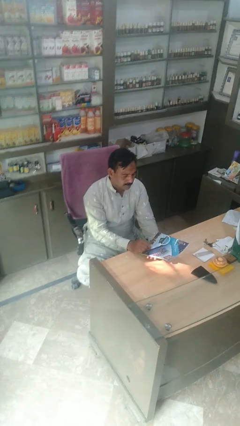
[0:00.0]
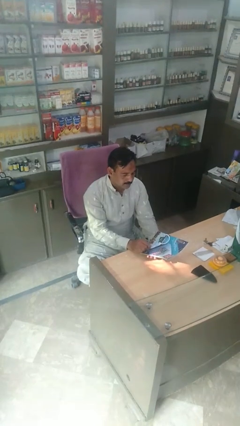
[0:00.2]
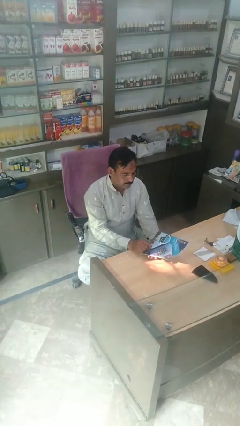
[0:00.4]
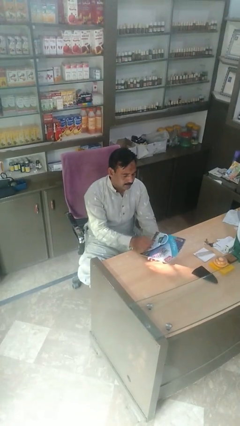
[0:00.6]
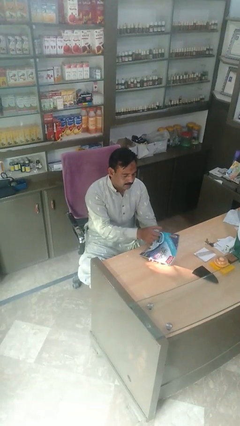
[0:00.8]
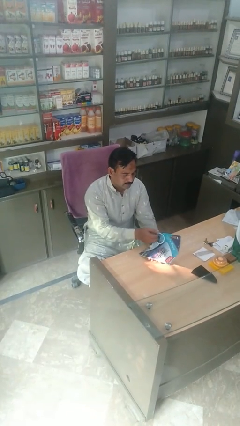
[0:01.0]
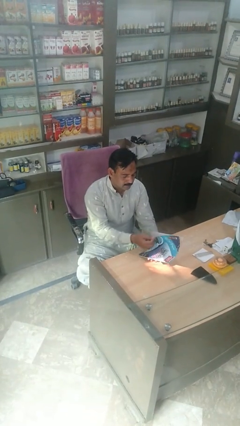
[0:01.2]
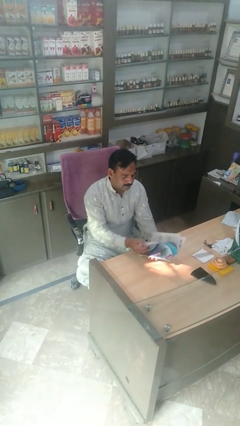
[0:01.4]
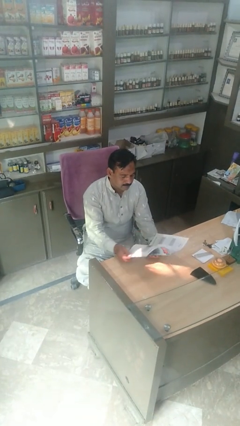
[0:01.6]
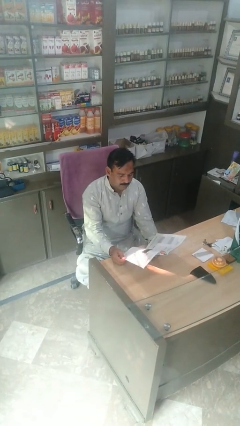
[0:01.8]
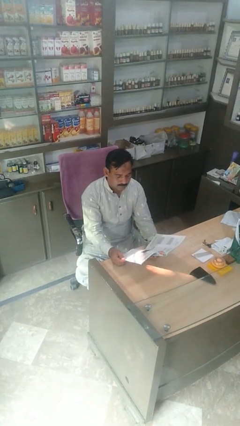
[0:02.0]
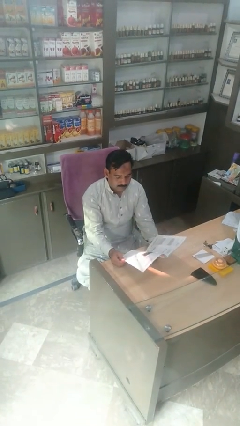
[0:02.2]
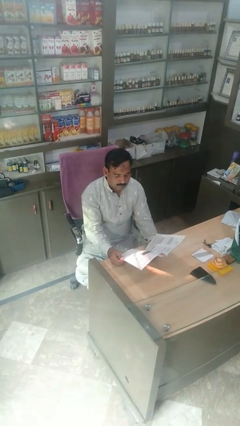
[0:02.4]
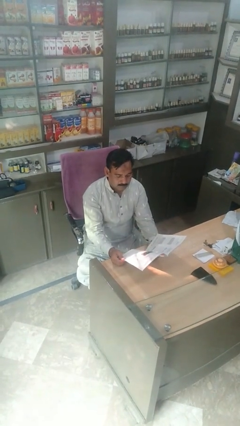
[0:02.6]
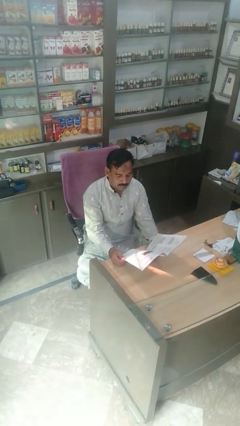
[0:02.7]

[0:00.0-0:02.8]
person reads magazine

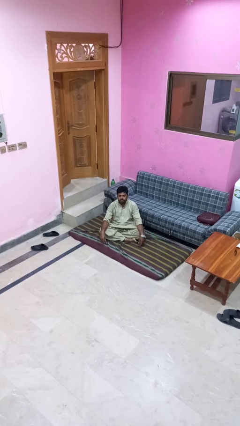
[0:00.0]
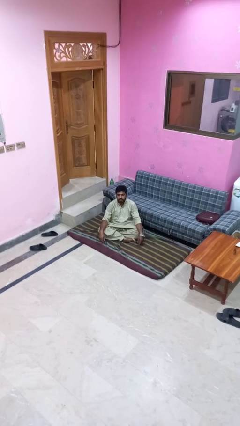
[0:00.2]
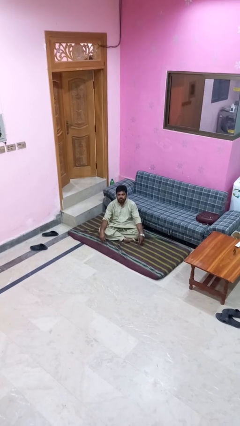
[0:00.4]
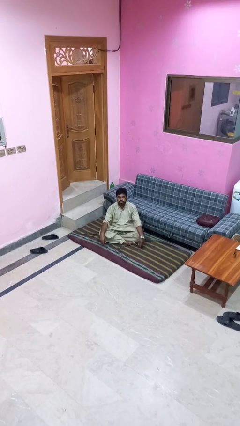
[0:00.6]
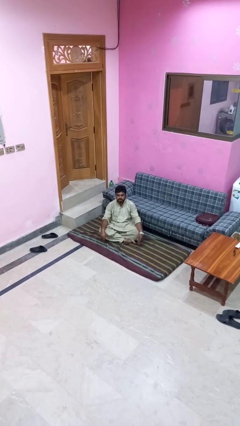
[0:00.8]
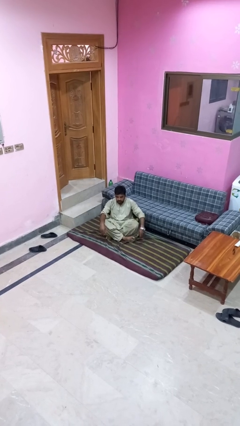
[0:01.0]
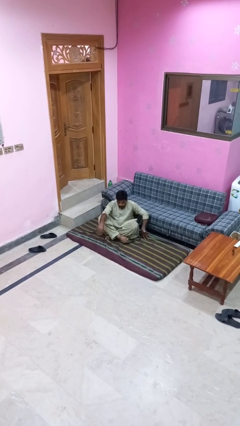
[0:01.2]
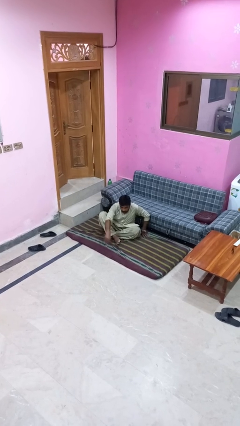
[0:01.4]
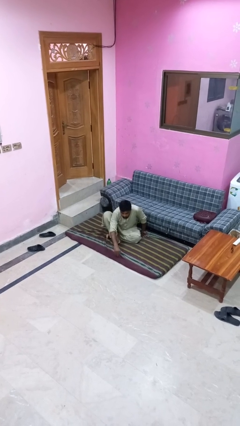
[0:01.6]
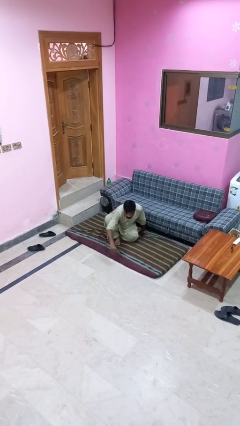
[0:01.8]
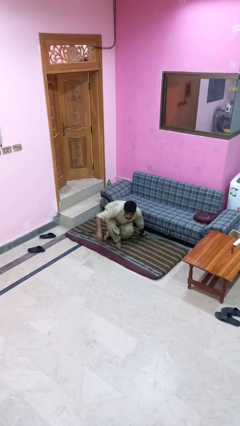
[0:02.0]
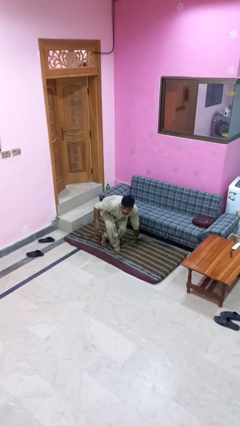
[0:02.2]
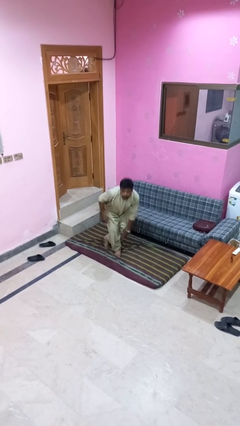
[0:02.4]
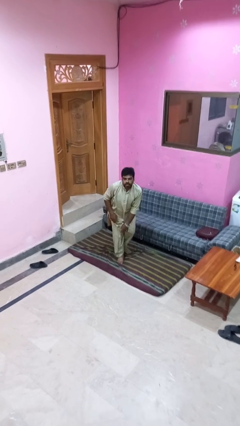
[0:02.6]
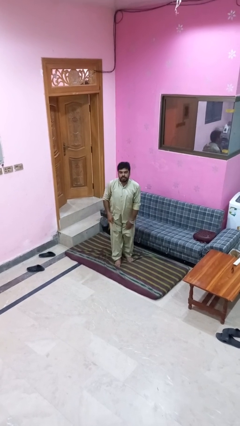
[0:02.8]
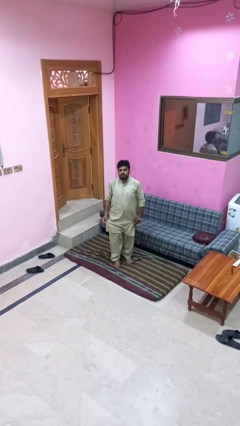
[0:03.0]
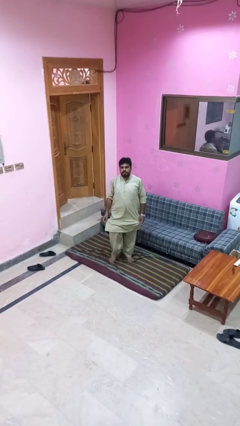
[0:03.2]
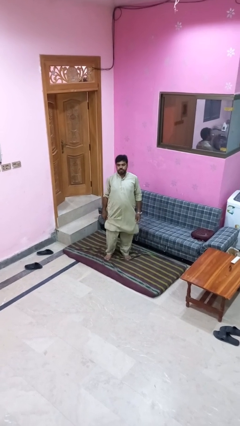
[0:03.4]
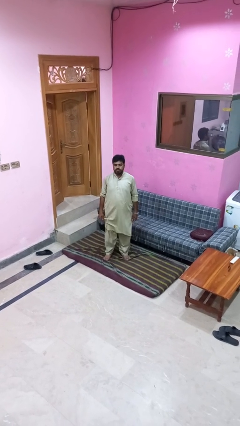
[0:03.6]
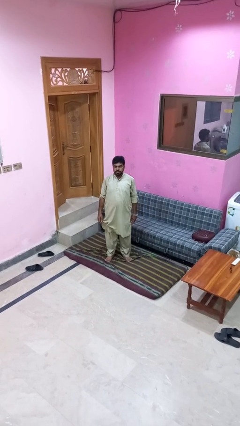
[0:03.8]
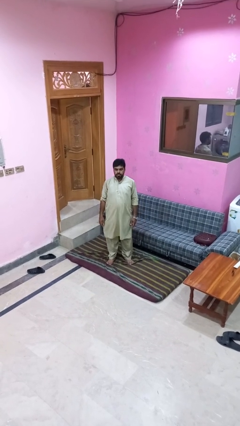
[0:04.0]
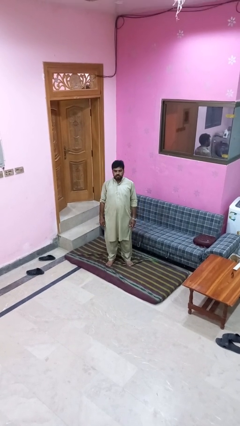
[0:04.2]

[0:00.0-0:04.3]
person stands up from floor

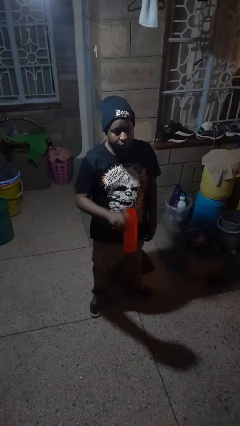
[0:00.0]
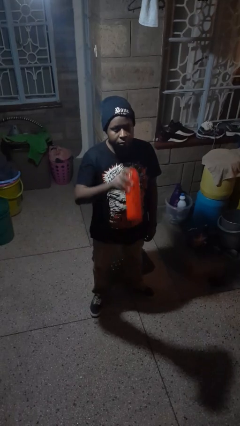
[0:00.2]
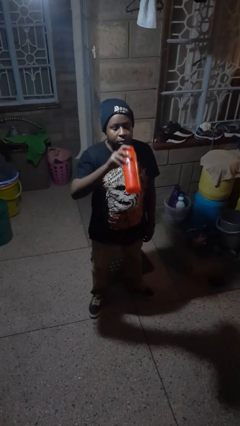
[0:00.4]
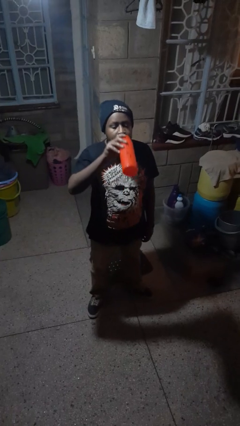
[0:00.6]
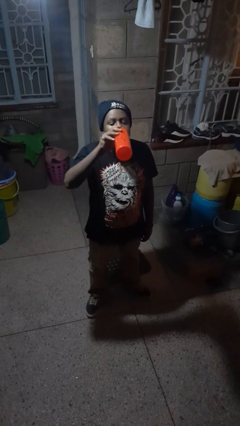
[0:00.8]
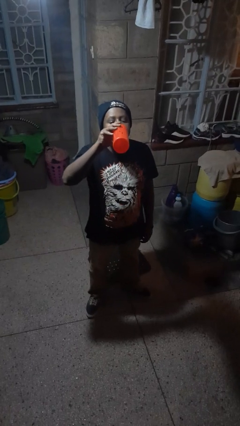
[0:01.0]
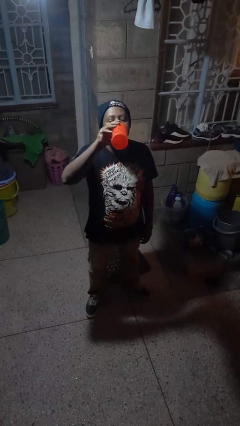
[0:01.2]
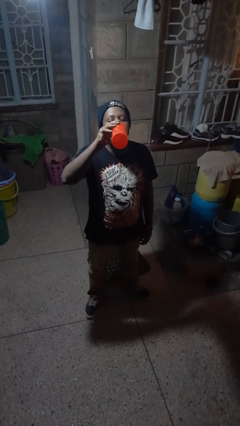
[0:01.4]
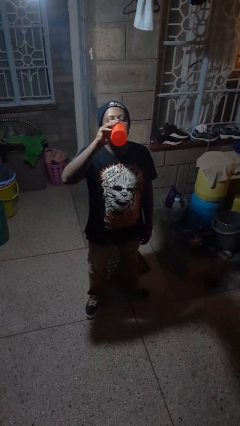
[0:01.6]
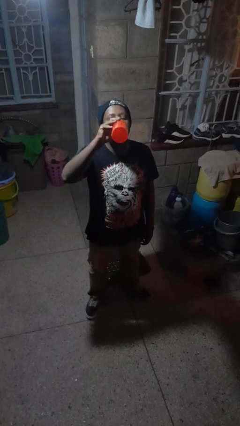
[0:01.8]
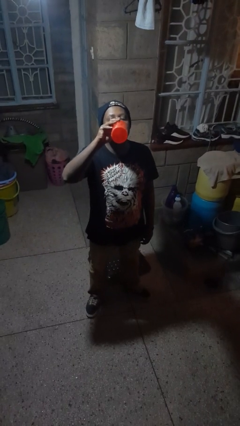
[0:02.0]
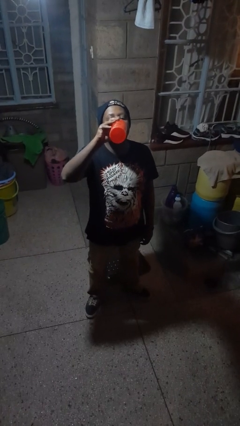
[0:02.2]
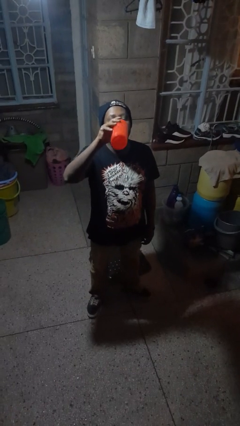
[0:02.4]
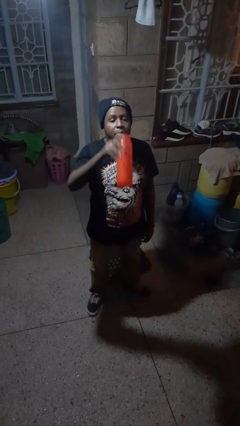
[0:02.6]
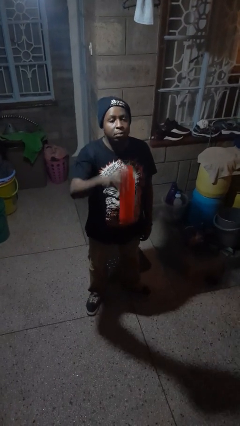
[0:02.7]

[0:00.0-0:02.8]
person drinks from bottle

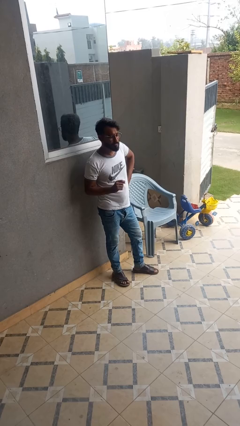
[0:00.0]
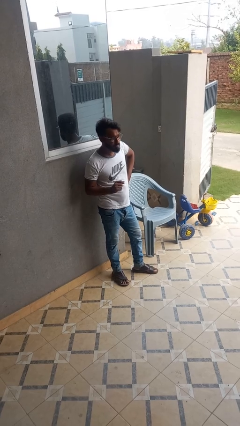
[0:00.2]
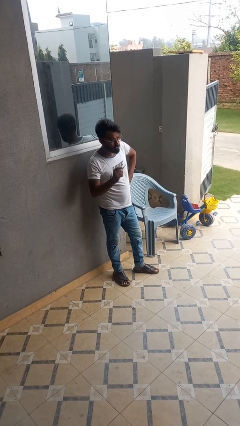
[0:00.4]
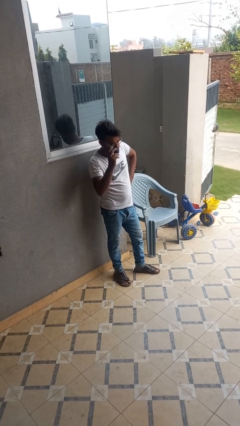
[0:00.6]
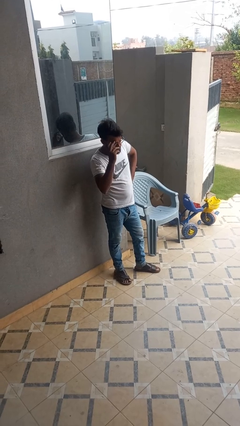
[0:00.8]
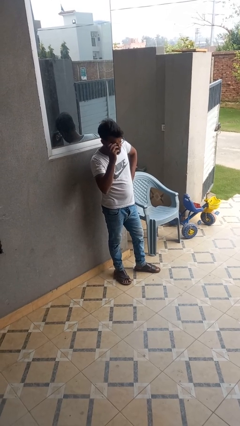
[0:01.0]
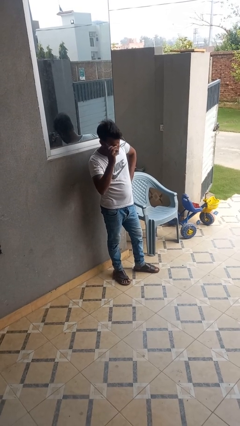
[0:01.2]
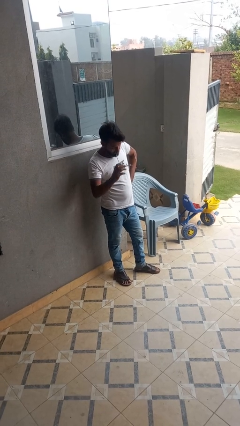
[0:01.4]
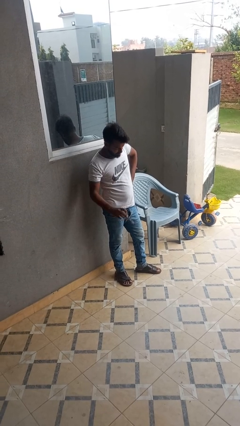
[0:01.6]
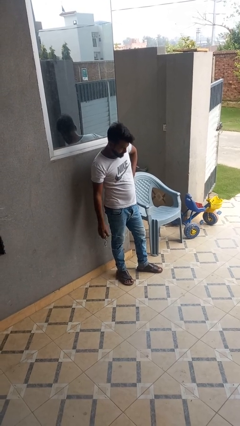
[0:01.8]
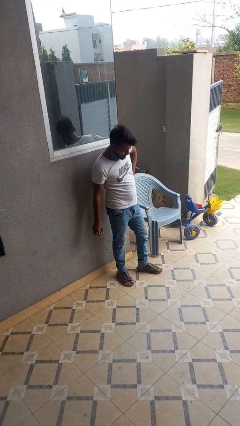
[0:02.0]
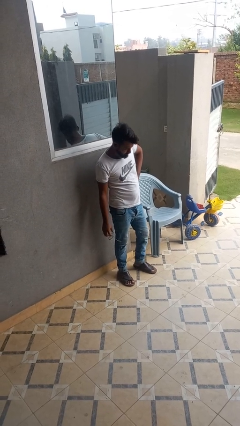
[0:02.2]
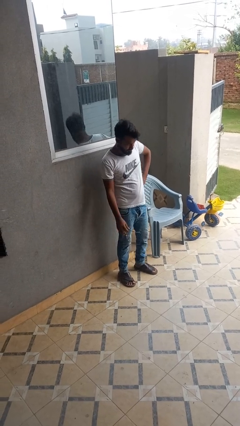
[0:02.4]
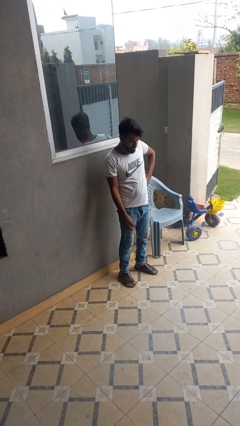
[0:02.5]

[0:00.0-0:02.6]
person takes off glasses

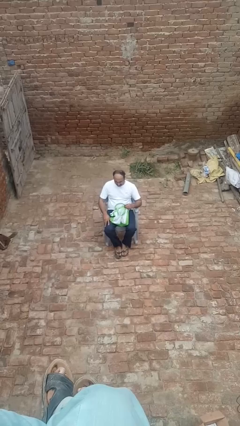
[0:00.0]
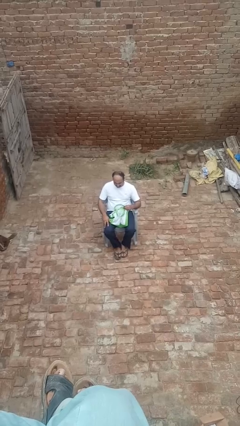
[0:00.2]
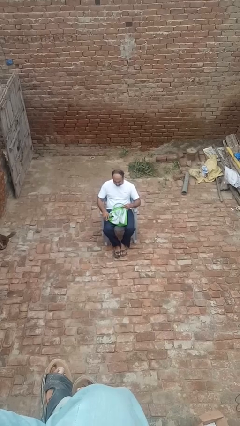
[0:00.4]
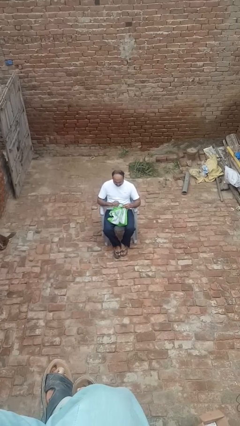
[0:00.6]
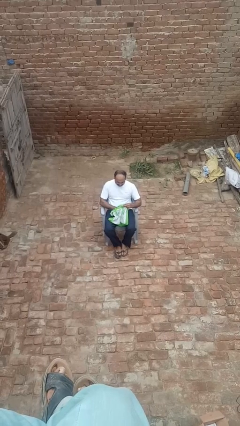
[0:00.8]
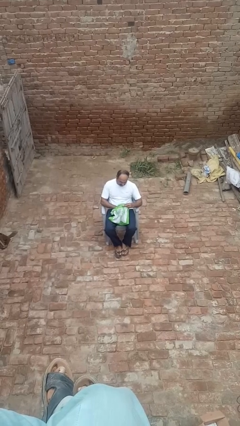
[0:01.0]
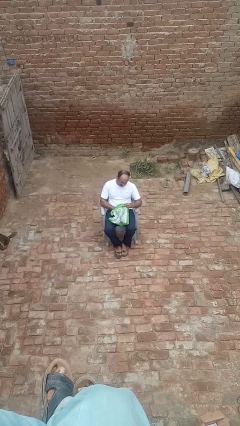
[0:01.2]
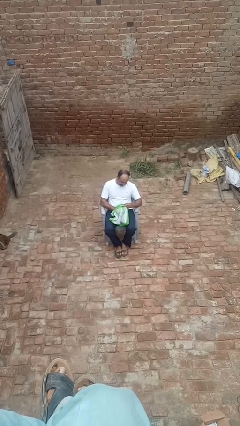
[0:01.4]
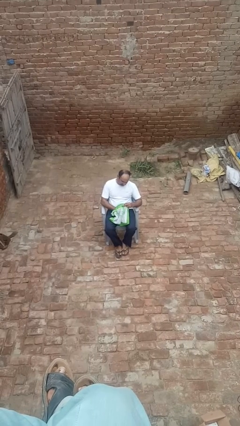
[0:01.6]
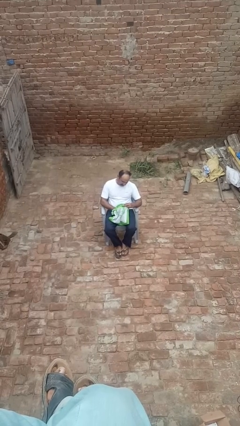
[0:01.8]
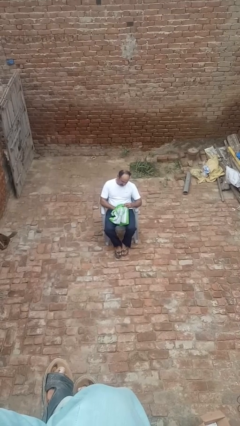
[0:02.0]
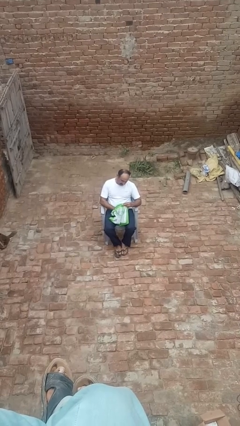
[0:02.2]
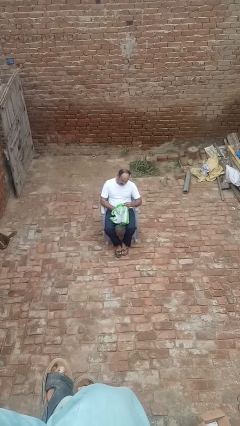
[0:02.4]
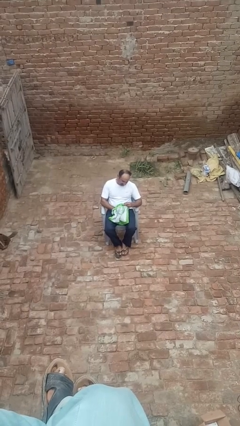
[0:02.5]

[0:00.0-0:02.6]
person searches in bag

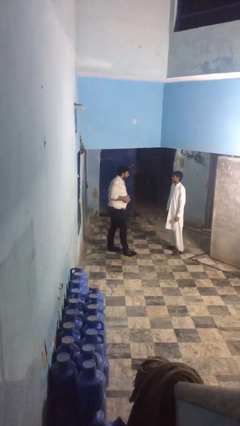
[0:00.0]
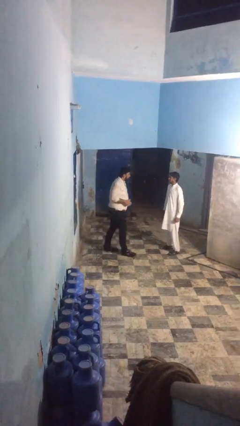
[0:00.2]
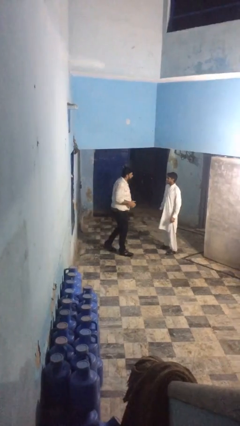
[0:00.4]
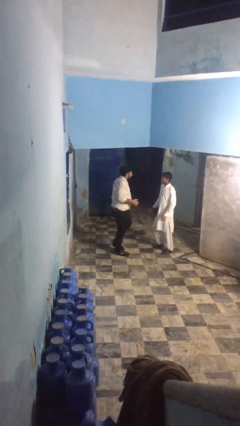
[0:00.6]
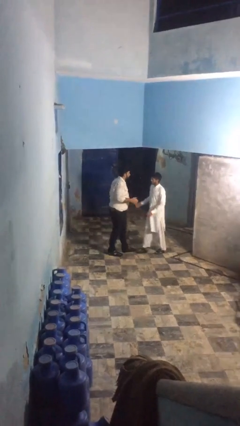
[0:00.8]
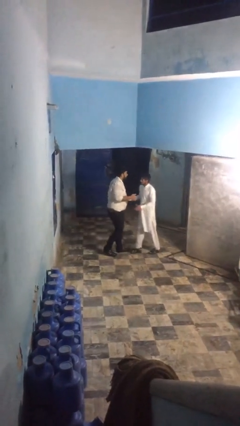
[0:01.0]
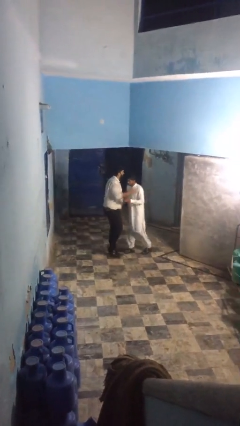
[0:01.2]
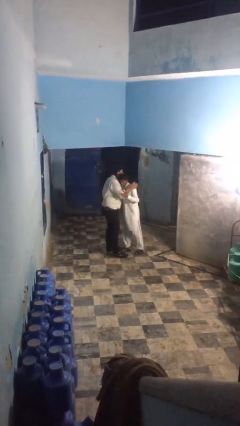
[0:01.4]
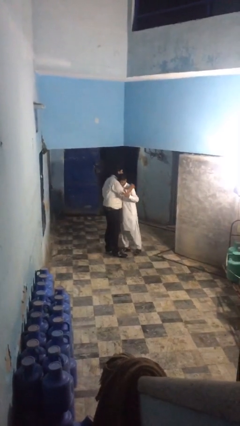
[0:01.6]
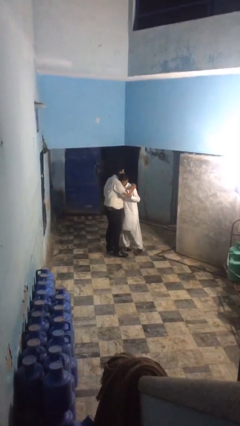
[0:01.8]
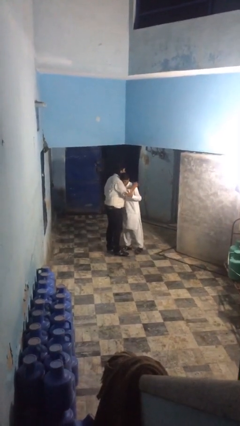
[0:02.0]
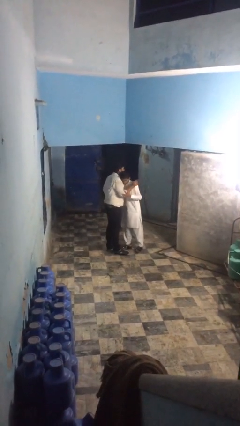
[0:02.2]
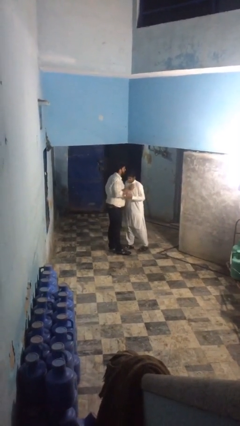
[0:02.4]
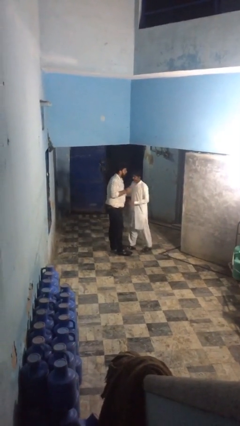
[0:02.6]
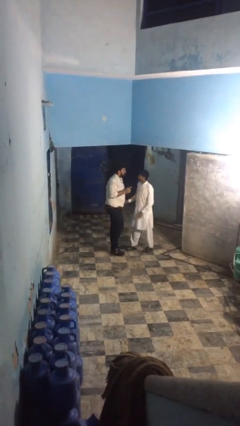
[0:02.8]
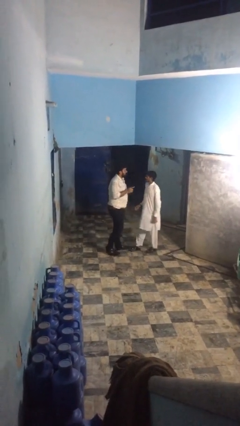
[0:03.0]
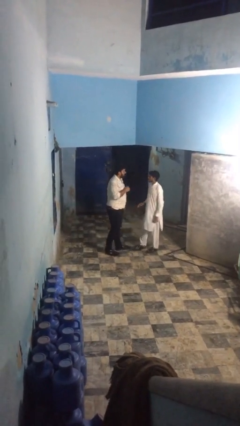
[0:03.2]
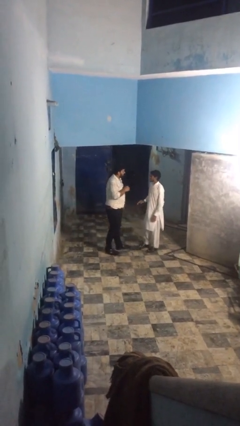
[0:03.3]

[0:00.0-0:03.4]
person embraces person
